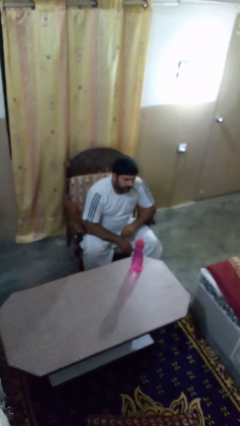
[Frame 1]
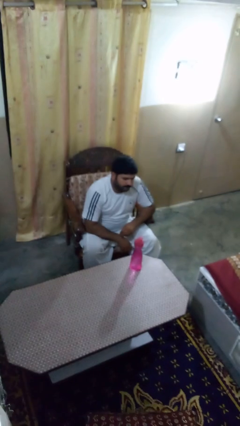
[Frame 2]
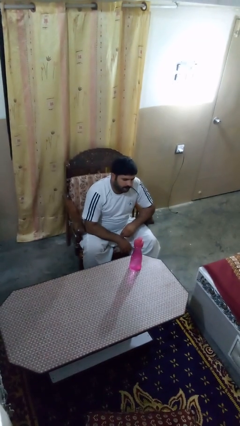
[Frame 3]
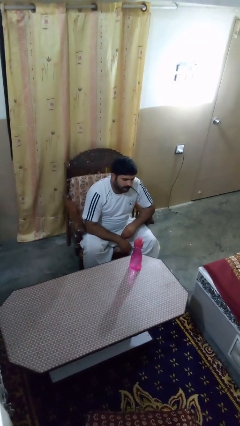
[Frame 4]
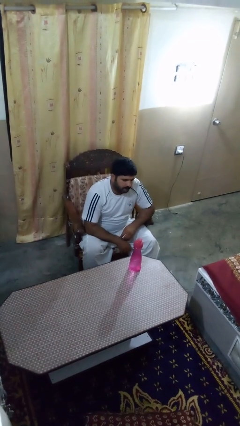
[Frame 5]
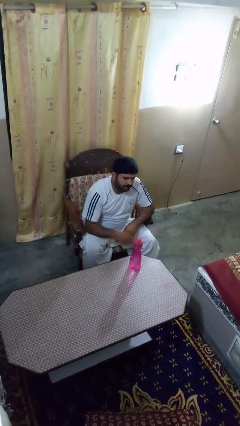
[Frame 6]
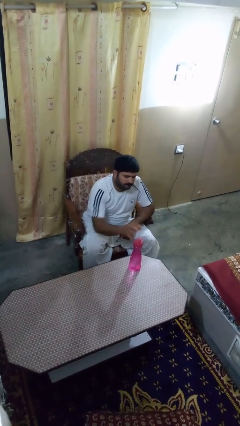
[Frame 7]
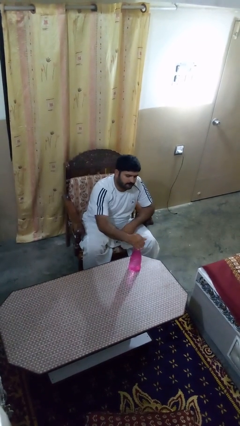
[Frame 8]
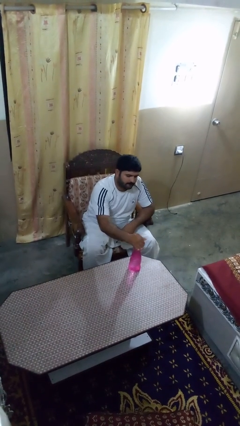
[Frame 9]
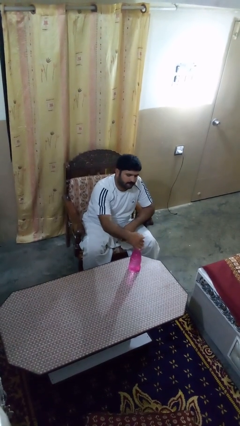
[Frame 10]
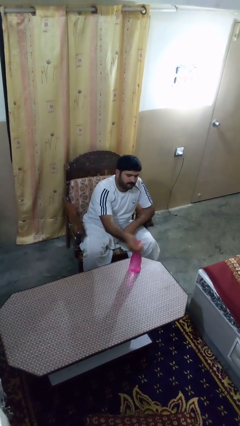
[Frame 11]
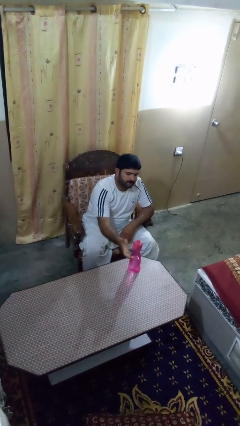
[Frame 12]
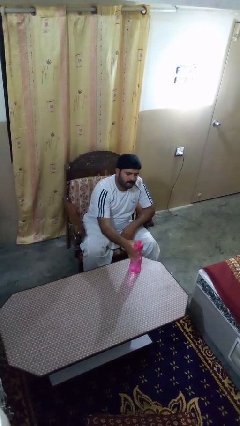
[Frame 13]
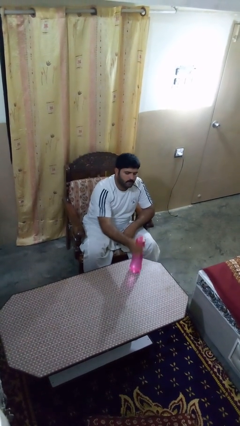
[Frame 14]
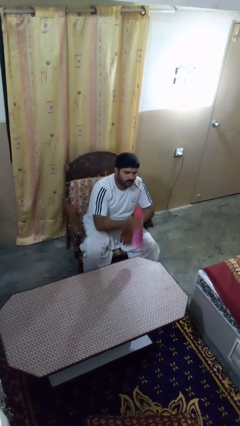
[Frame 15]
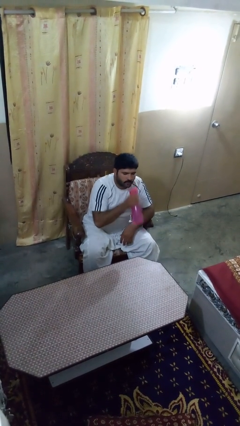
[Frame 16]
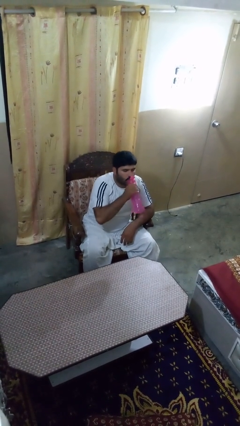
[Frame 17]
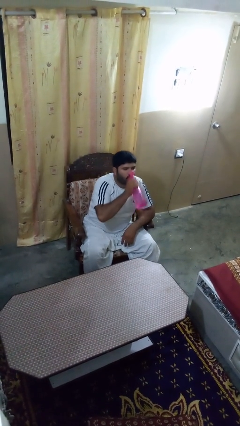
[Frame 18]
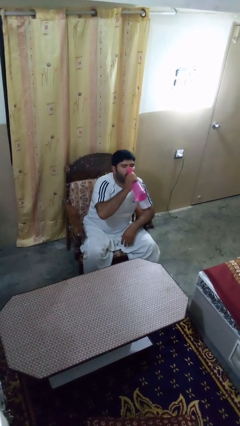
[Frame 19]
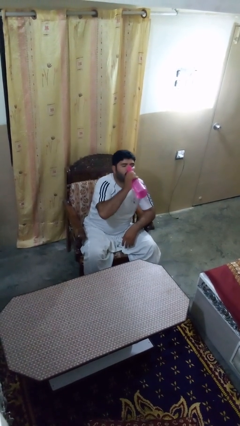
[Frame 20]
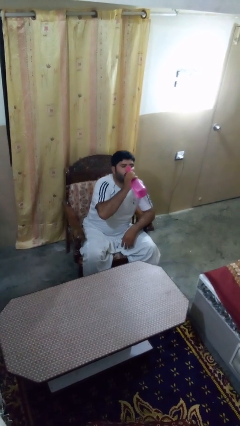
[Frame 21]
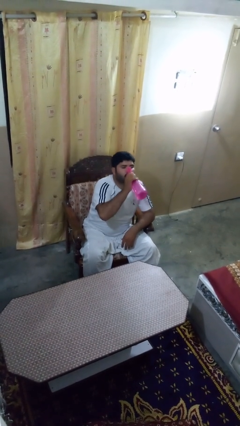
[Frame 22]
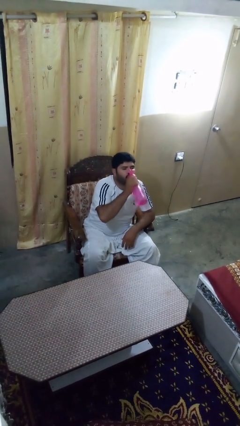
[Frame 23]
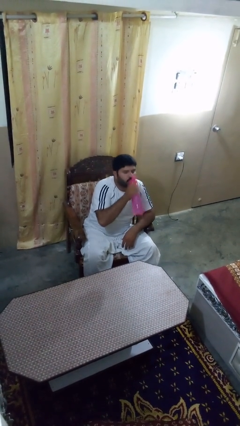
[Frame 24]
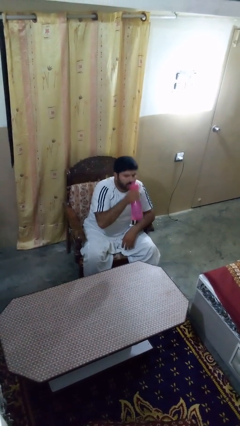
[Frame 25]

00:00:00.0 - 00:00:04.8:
person drinks from bottle

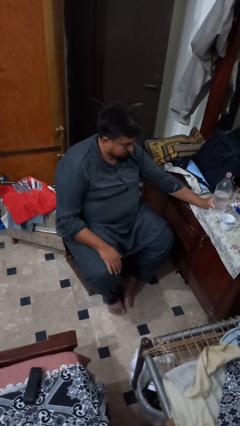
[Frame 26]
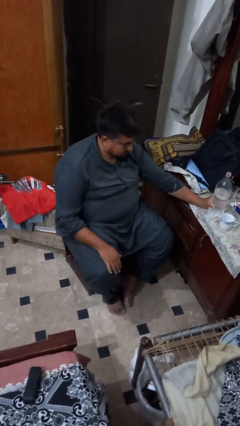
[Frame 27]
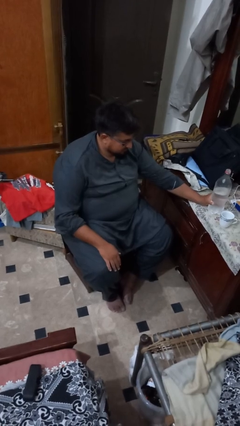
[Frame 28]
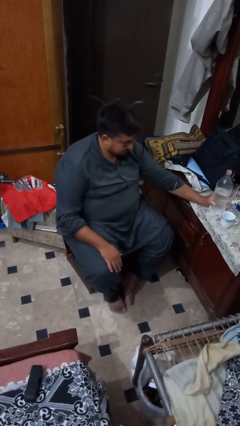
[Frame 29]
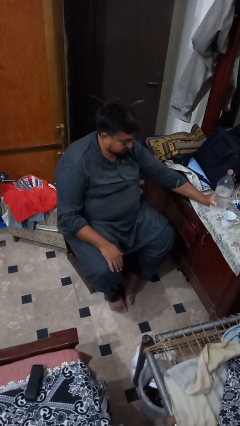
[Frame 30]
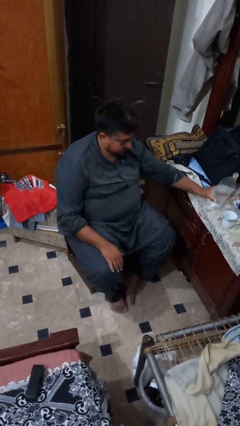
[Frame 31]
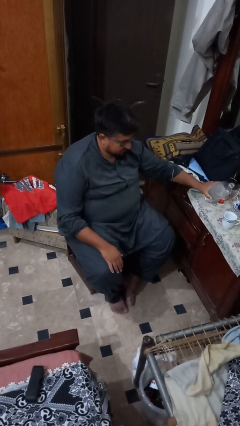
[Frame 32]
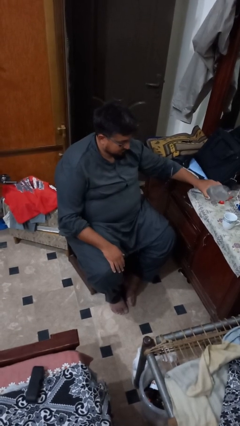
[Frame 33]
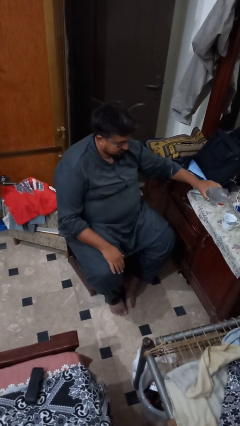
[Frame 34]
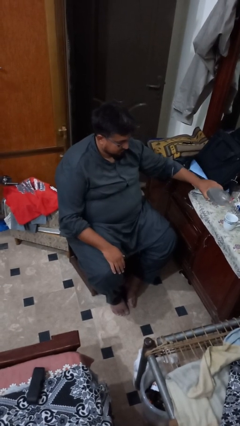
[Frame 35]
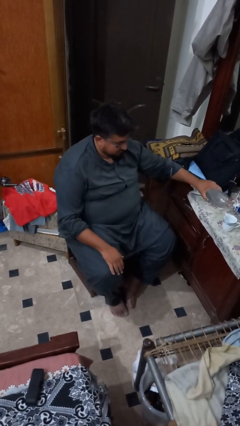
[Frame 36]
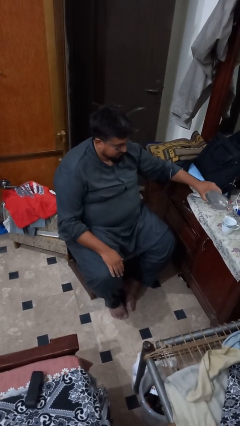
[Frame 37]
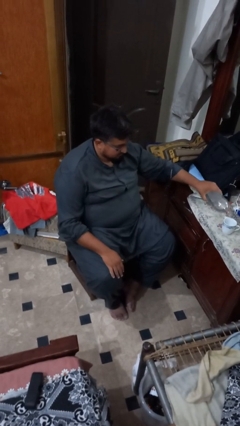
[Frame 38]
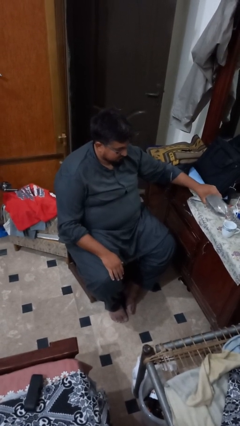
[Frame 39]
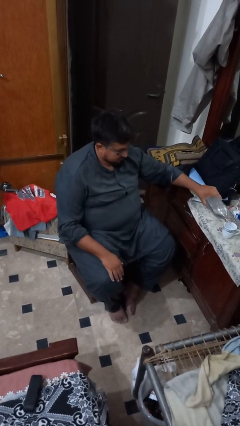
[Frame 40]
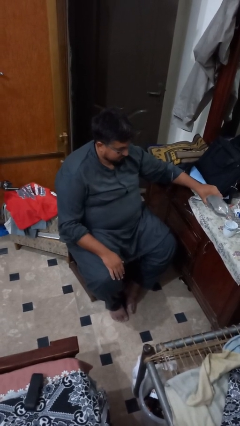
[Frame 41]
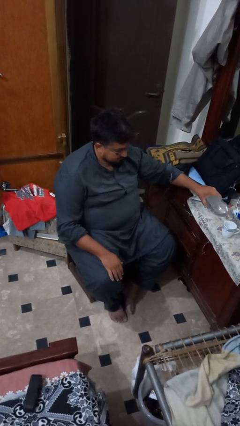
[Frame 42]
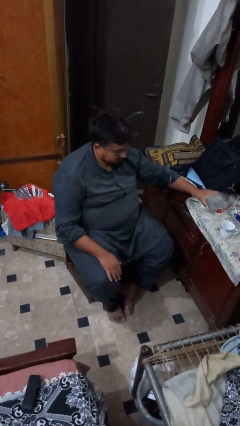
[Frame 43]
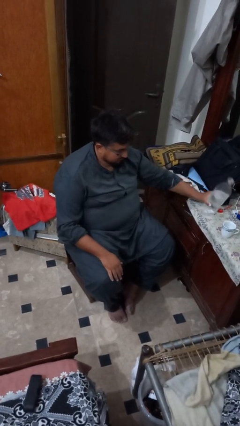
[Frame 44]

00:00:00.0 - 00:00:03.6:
person pours liquid into cup

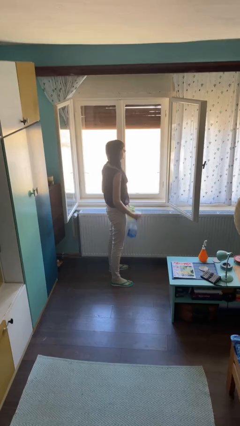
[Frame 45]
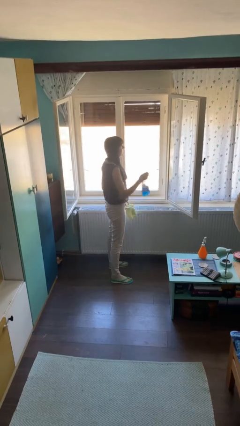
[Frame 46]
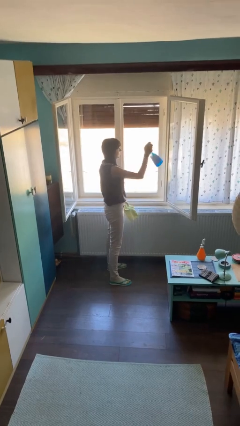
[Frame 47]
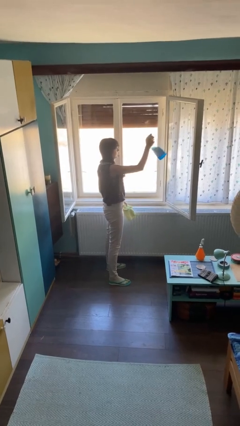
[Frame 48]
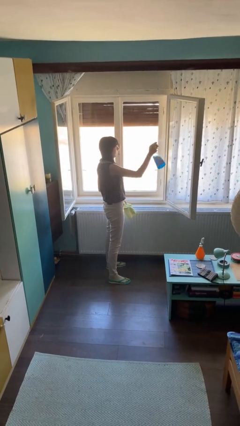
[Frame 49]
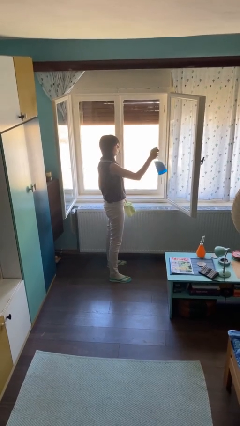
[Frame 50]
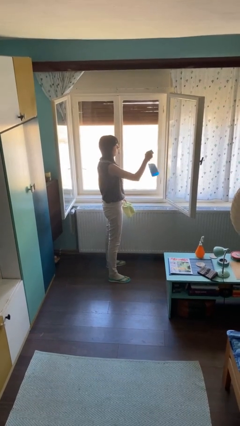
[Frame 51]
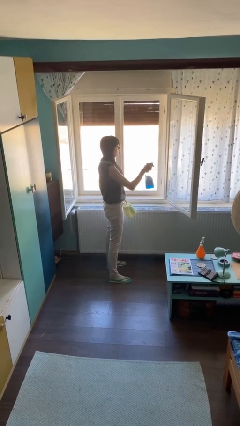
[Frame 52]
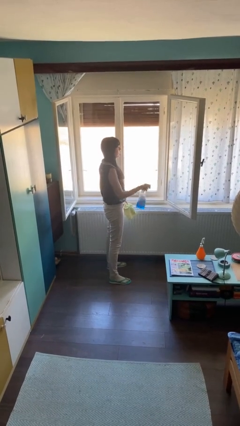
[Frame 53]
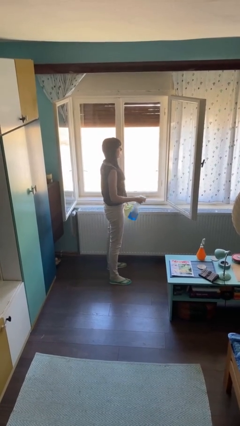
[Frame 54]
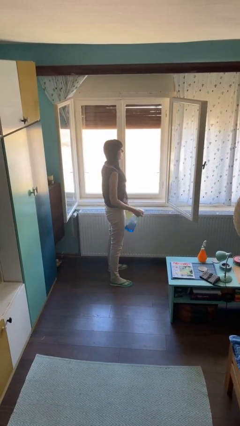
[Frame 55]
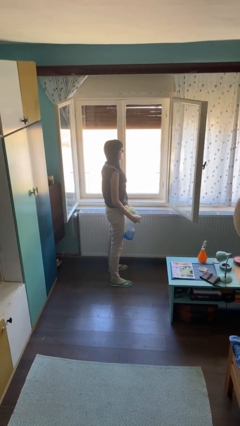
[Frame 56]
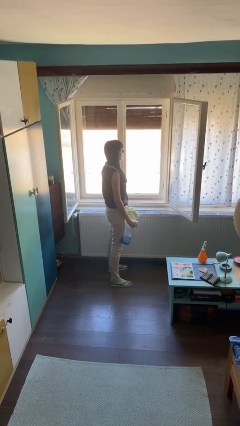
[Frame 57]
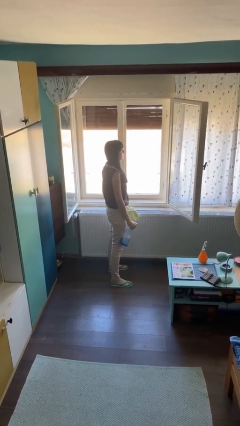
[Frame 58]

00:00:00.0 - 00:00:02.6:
person sprays from bottle

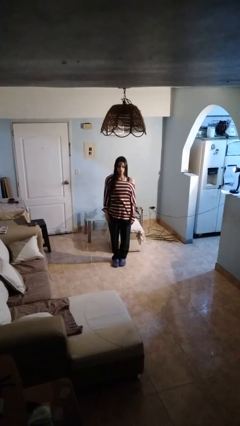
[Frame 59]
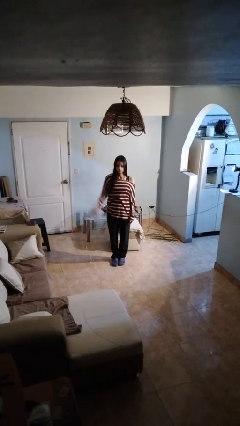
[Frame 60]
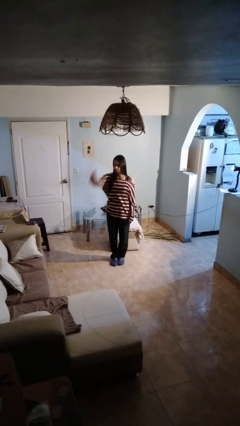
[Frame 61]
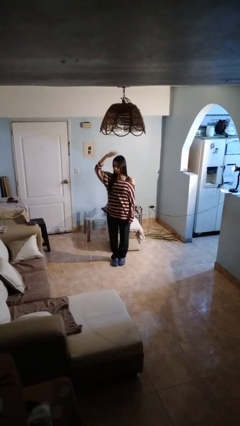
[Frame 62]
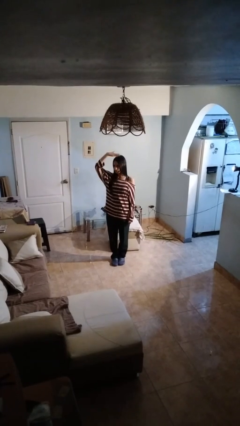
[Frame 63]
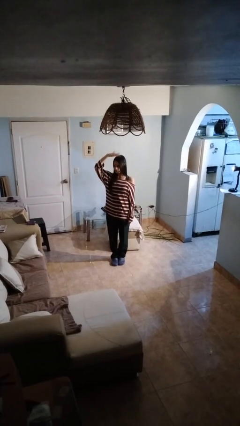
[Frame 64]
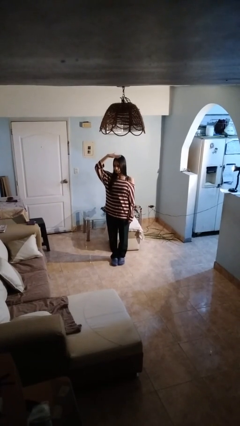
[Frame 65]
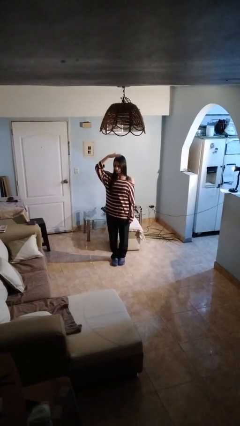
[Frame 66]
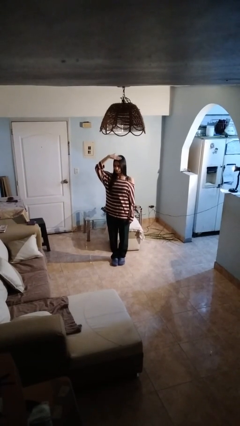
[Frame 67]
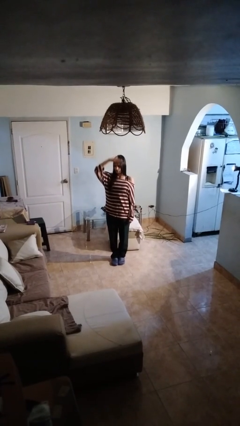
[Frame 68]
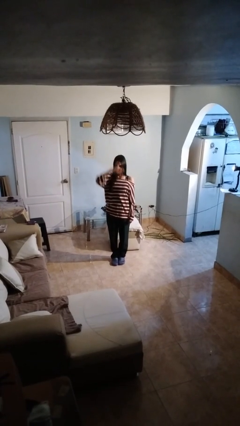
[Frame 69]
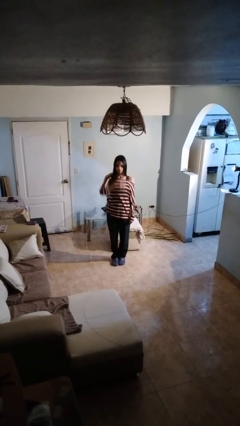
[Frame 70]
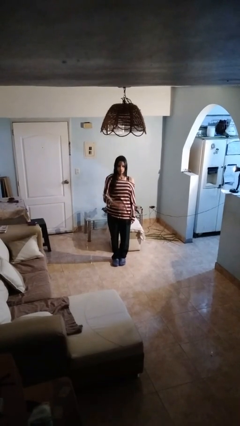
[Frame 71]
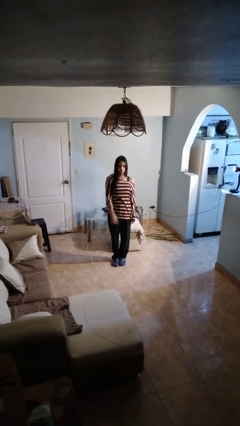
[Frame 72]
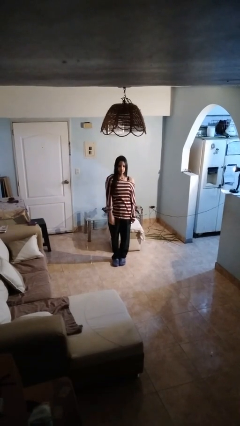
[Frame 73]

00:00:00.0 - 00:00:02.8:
person pats head

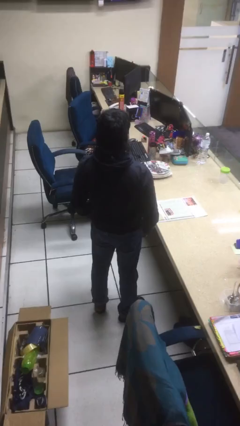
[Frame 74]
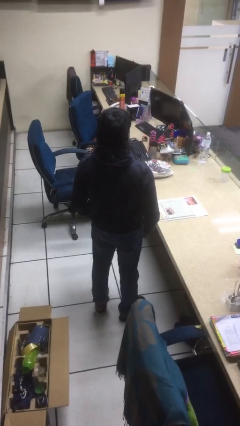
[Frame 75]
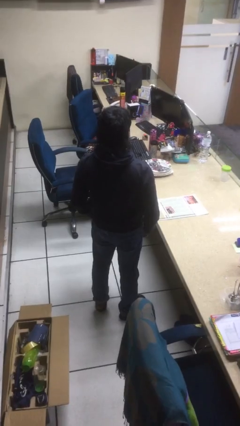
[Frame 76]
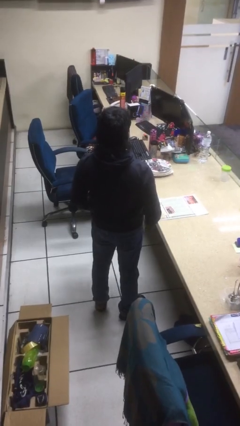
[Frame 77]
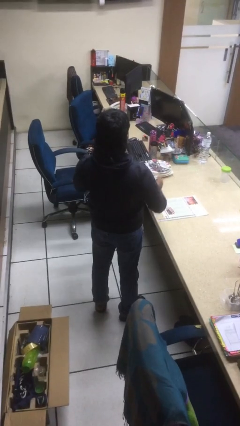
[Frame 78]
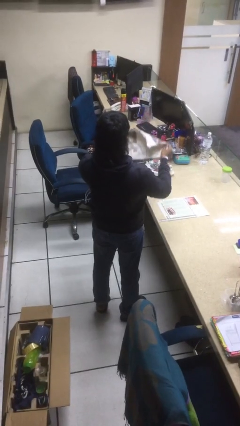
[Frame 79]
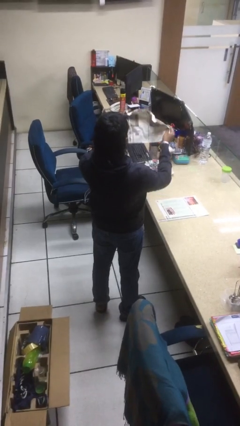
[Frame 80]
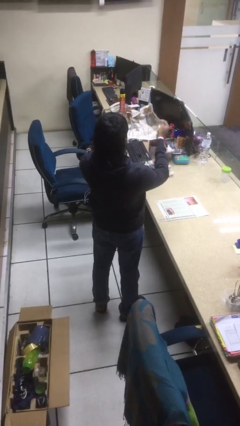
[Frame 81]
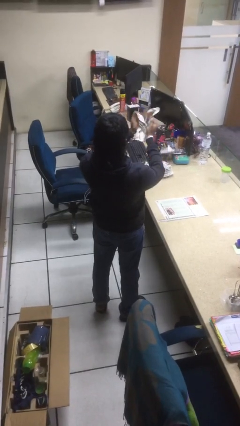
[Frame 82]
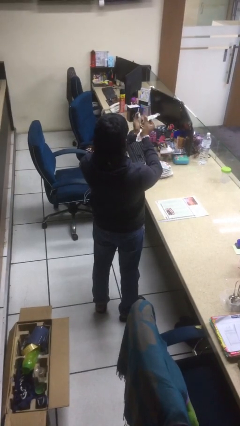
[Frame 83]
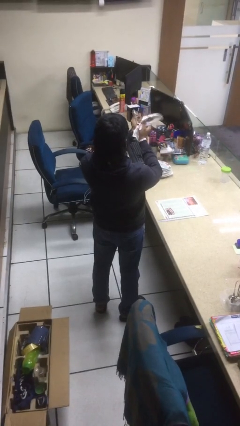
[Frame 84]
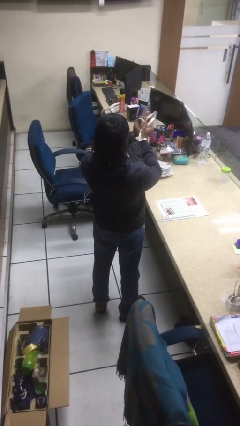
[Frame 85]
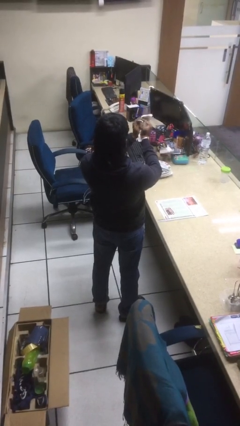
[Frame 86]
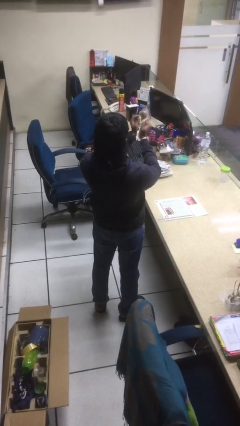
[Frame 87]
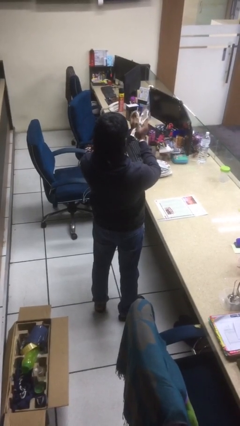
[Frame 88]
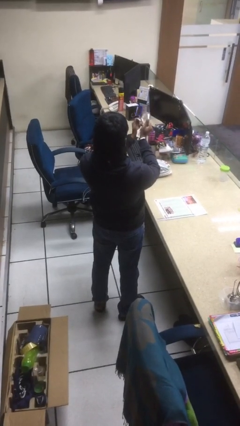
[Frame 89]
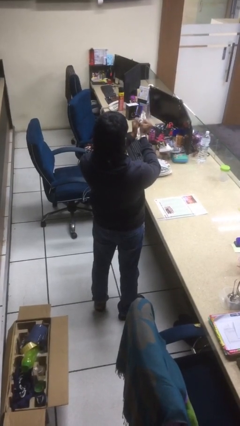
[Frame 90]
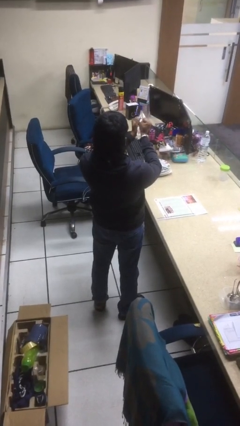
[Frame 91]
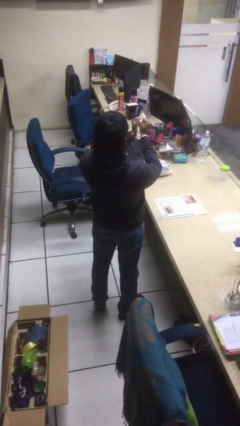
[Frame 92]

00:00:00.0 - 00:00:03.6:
person crumples paper

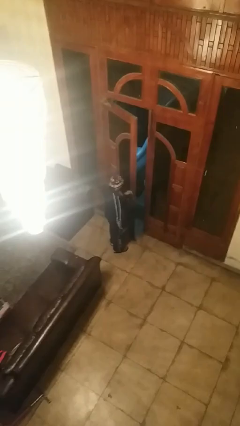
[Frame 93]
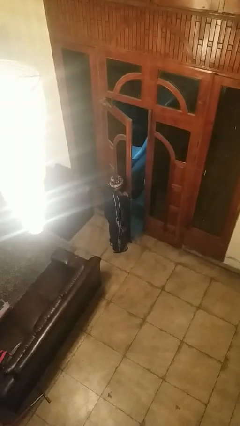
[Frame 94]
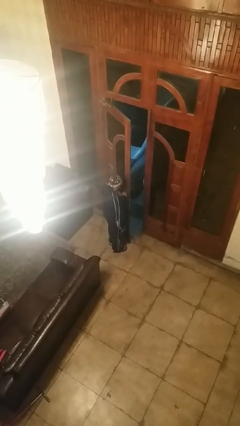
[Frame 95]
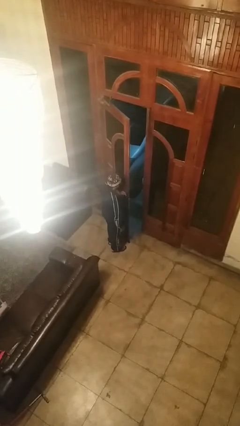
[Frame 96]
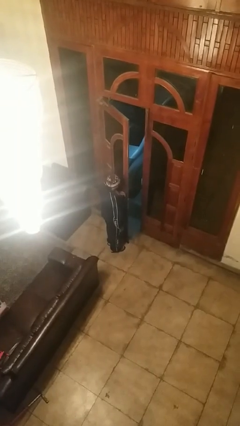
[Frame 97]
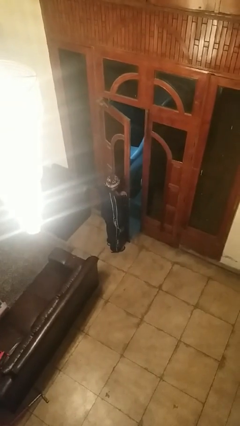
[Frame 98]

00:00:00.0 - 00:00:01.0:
person opens facility door
